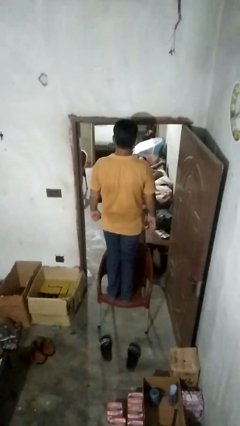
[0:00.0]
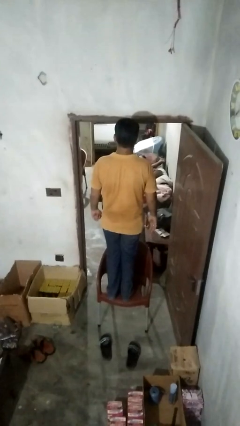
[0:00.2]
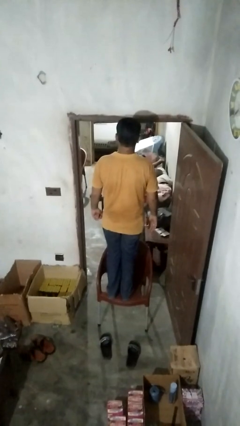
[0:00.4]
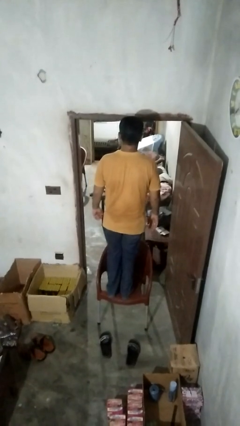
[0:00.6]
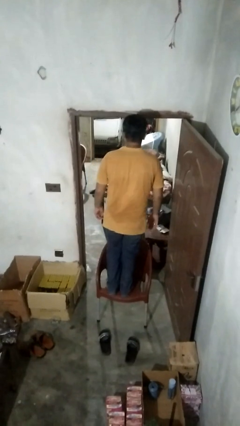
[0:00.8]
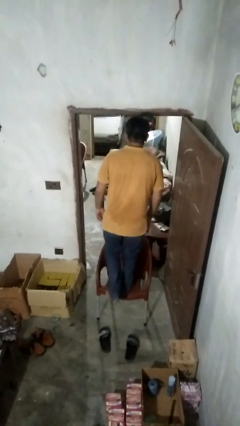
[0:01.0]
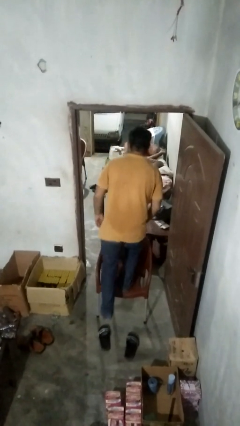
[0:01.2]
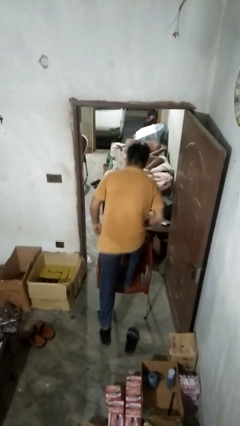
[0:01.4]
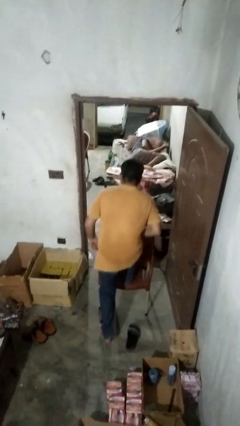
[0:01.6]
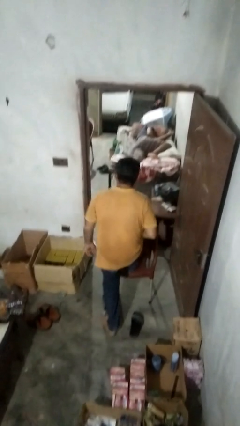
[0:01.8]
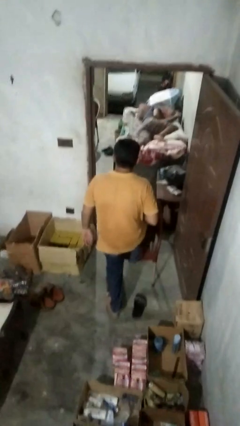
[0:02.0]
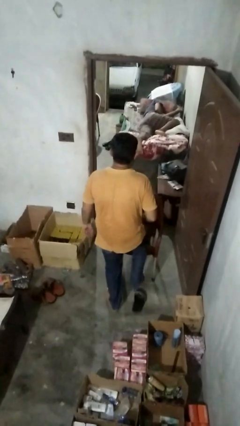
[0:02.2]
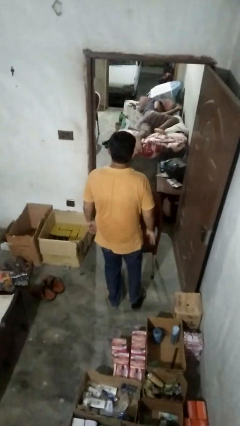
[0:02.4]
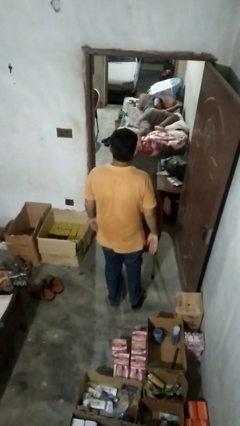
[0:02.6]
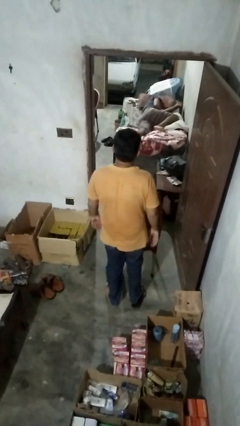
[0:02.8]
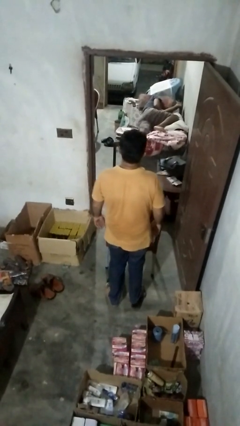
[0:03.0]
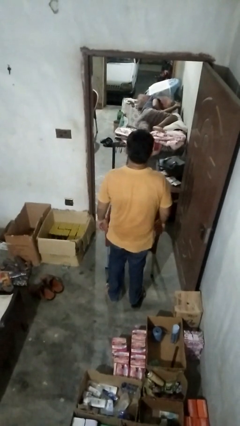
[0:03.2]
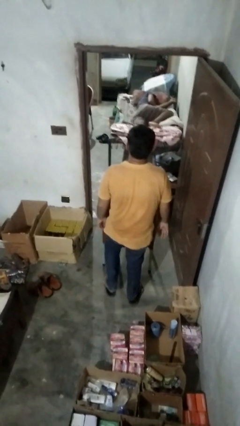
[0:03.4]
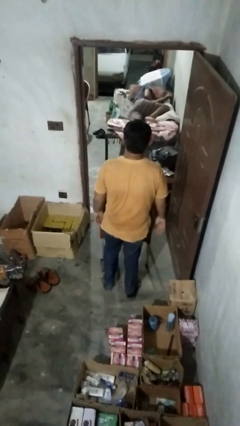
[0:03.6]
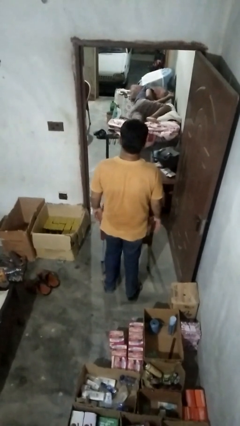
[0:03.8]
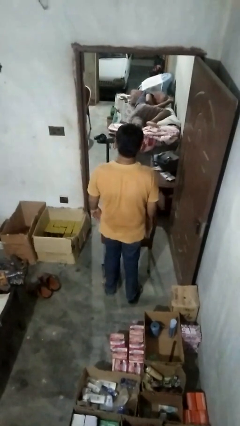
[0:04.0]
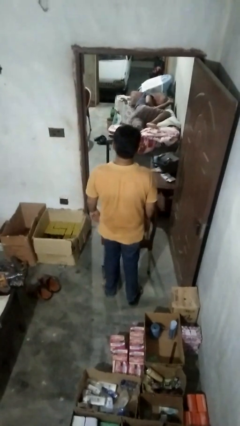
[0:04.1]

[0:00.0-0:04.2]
person climbs off chair

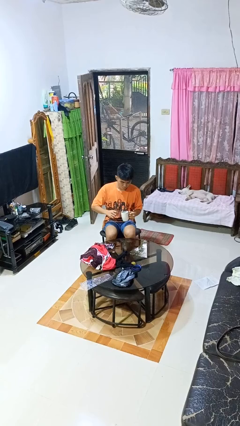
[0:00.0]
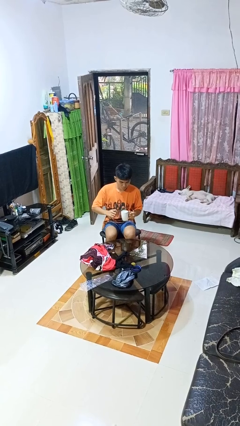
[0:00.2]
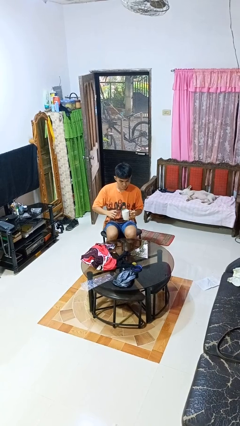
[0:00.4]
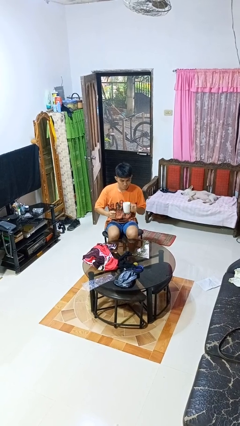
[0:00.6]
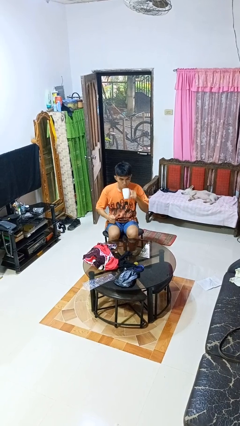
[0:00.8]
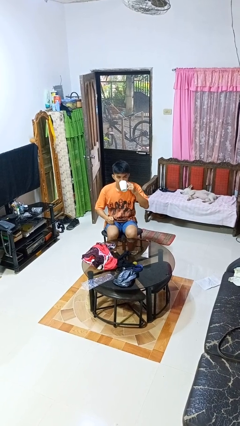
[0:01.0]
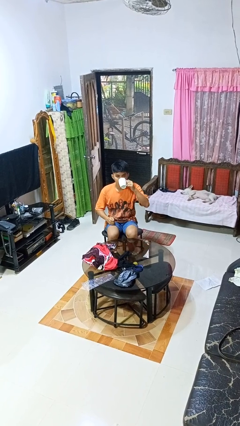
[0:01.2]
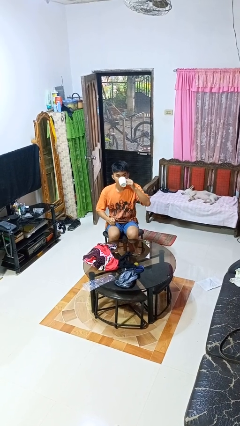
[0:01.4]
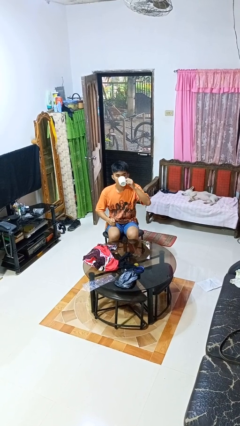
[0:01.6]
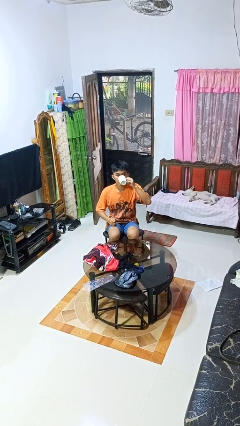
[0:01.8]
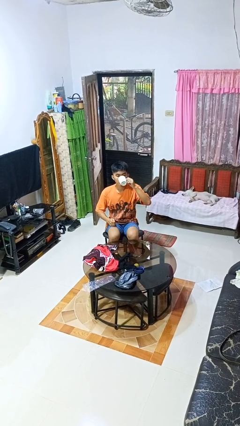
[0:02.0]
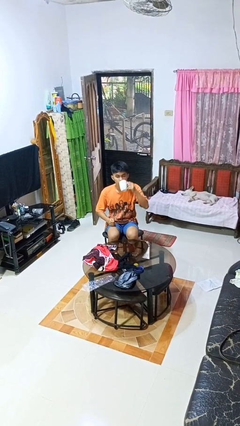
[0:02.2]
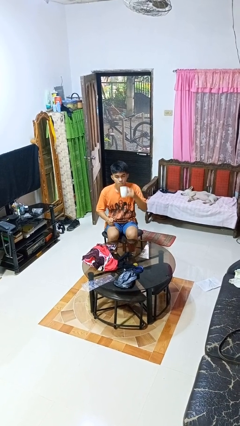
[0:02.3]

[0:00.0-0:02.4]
person drinks from mug

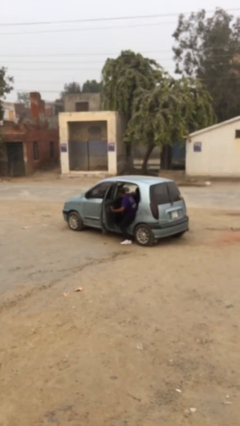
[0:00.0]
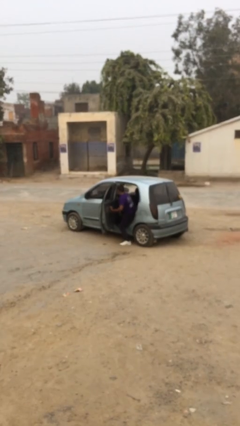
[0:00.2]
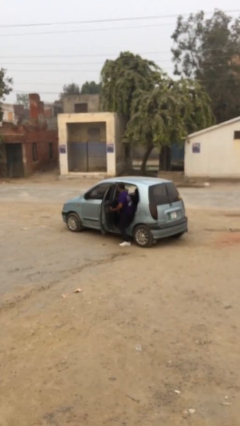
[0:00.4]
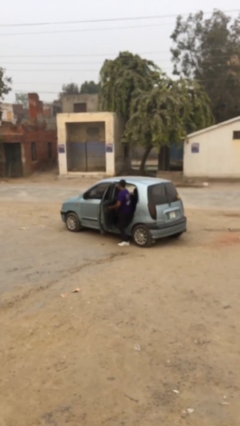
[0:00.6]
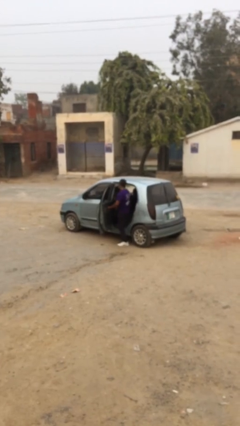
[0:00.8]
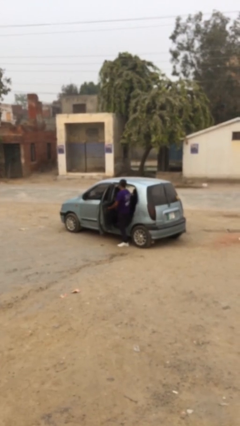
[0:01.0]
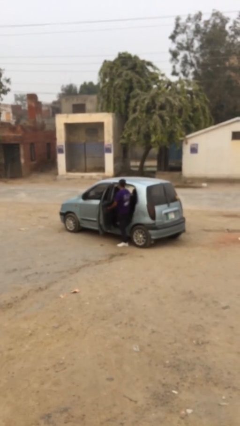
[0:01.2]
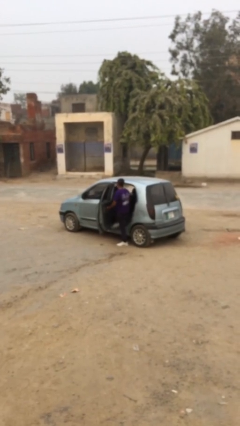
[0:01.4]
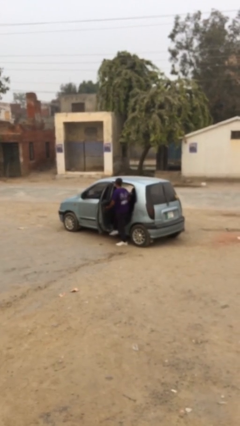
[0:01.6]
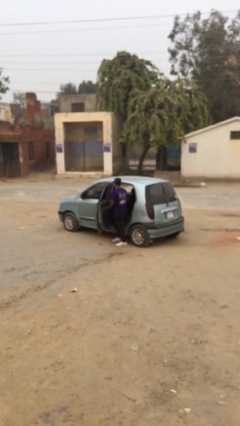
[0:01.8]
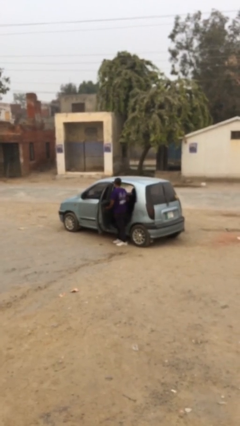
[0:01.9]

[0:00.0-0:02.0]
person exits car

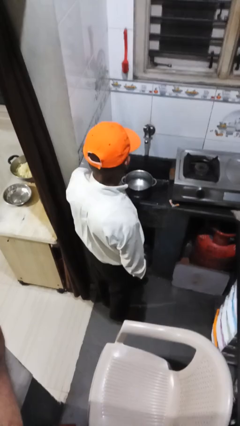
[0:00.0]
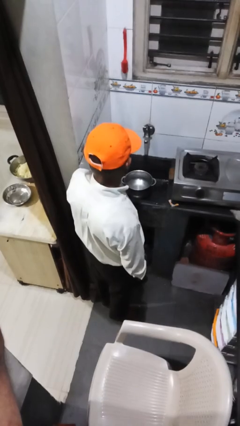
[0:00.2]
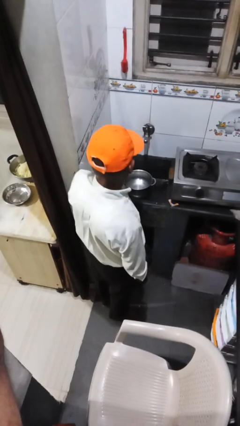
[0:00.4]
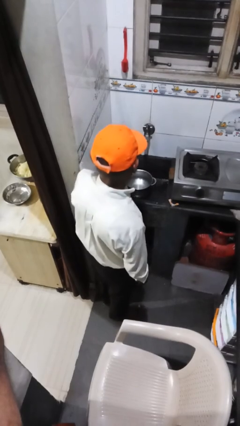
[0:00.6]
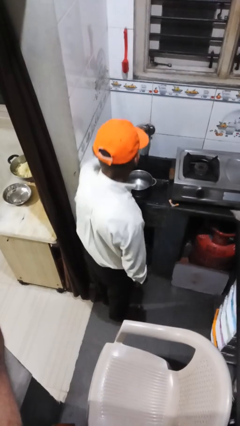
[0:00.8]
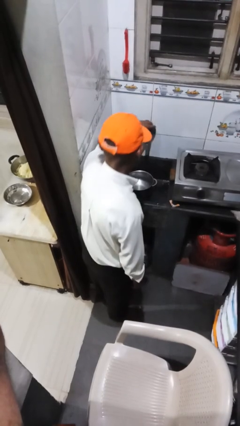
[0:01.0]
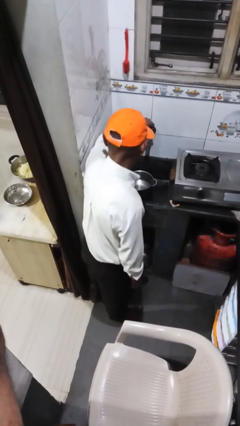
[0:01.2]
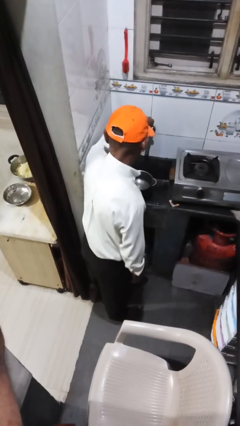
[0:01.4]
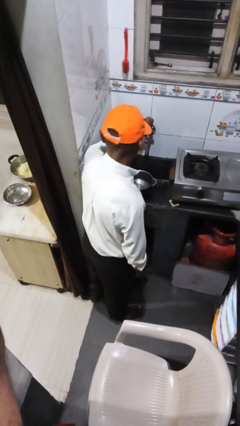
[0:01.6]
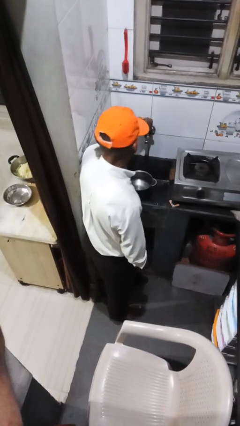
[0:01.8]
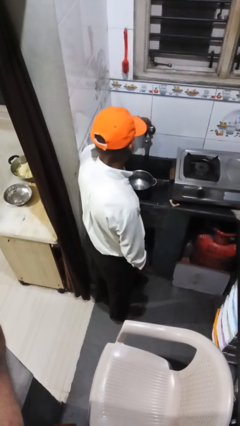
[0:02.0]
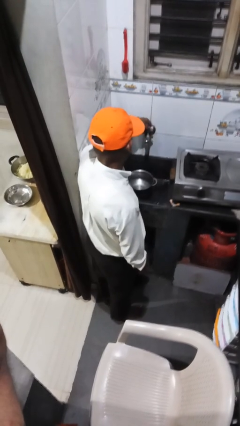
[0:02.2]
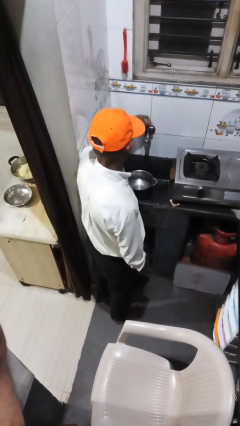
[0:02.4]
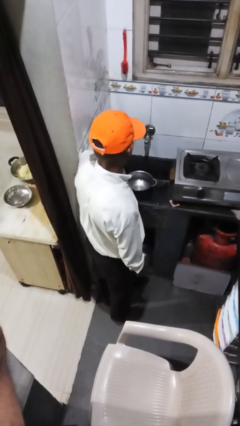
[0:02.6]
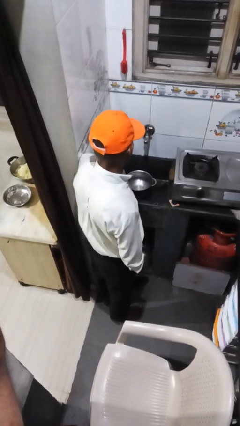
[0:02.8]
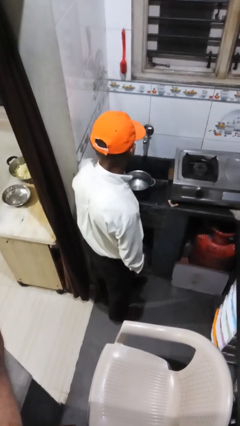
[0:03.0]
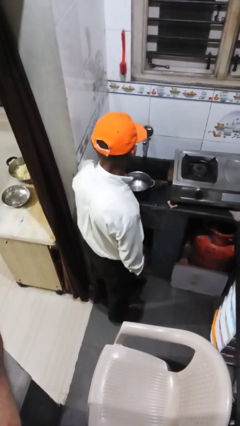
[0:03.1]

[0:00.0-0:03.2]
person turns on faucet

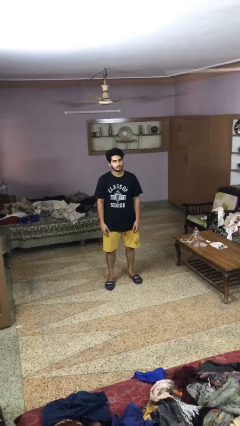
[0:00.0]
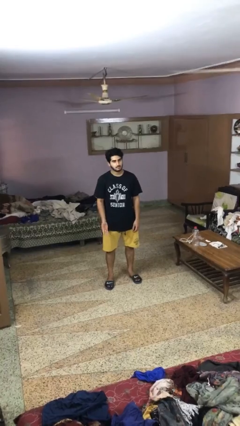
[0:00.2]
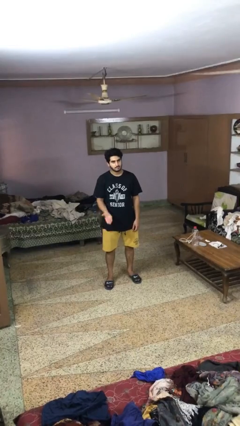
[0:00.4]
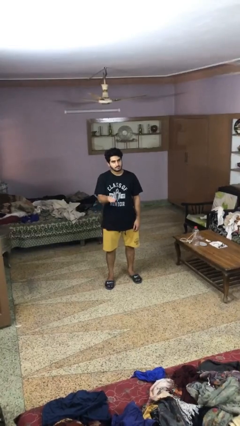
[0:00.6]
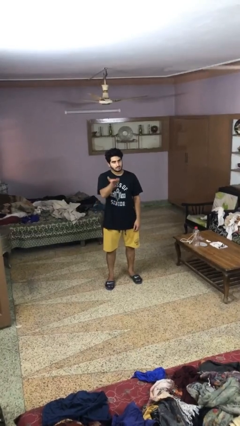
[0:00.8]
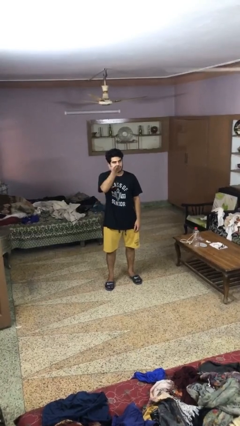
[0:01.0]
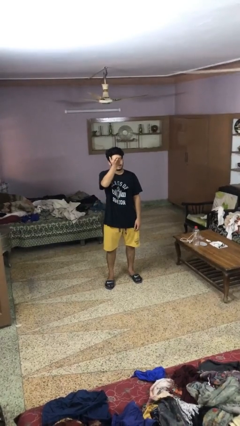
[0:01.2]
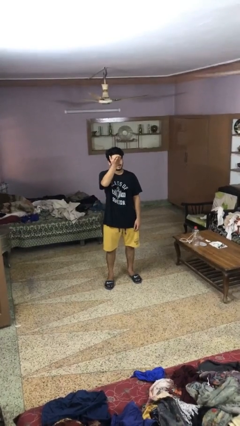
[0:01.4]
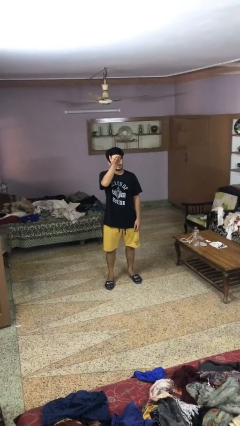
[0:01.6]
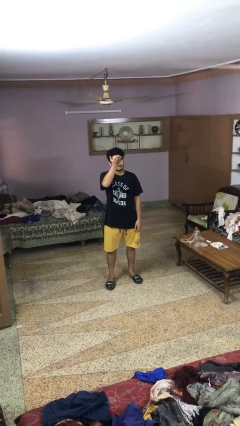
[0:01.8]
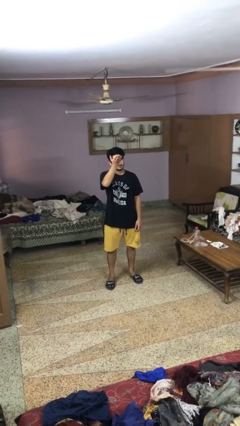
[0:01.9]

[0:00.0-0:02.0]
person gestures swipe up

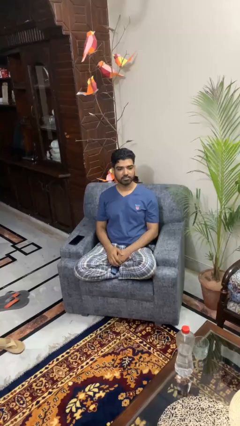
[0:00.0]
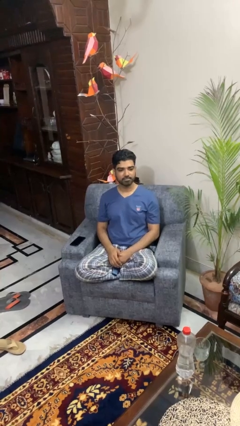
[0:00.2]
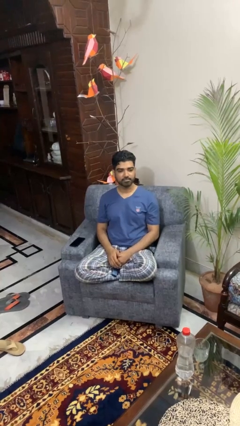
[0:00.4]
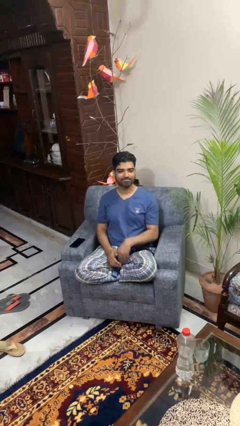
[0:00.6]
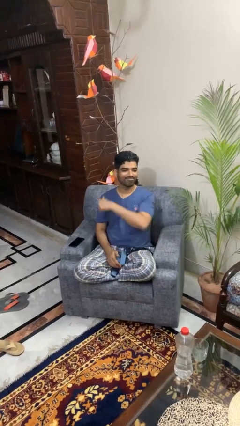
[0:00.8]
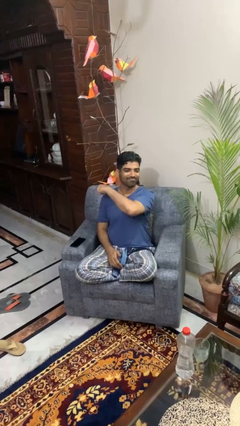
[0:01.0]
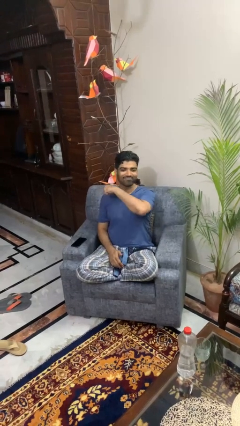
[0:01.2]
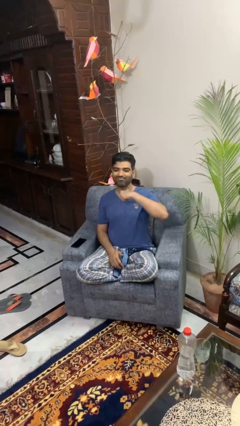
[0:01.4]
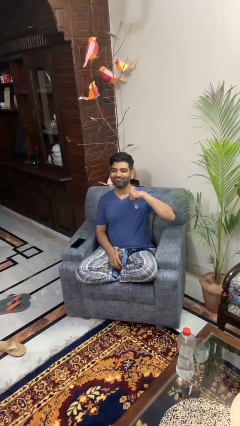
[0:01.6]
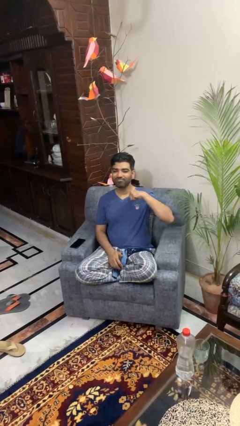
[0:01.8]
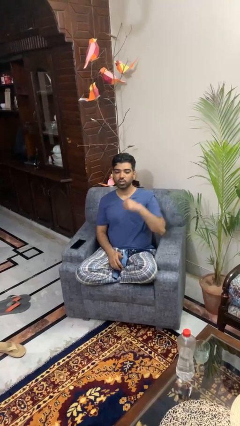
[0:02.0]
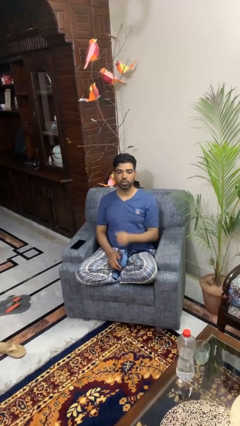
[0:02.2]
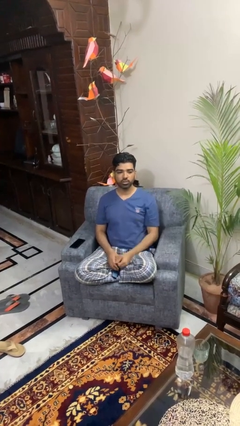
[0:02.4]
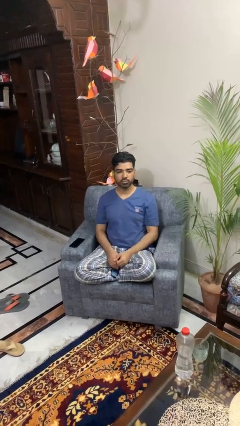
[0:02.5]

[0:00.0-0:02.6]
person gestures cut

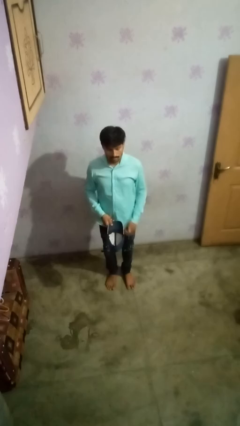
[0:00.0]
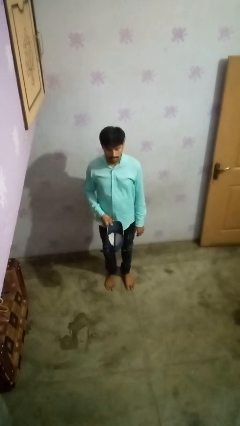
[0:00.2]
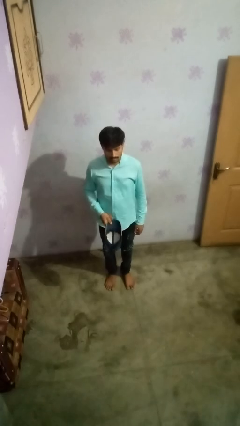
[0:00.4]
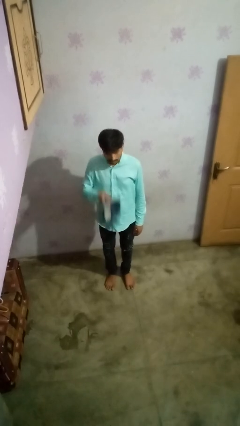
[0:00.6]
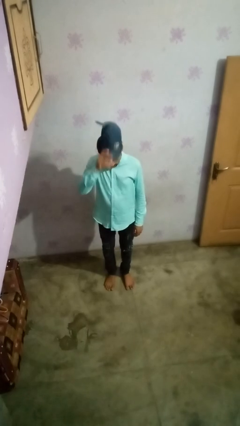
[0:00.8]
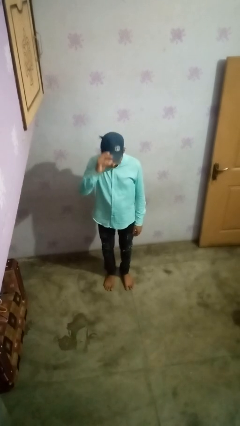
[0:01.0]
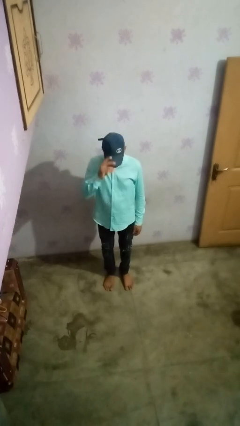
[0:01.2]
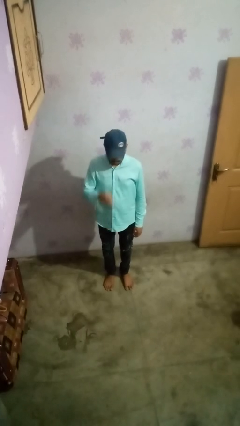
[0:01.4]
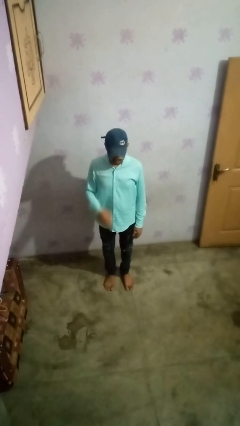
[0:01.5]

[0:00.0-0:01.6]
person puts on hat
